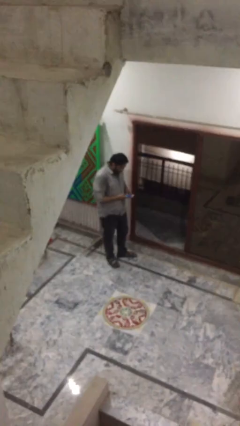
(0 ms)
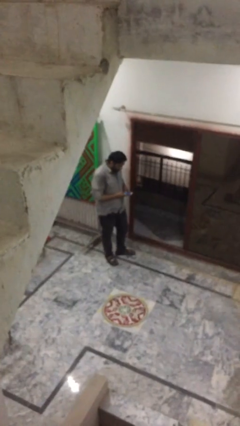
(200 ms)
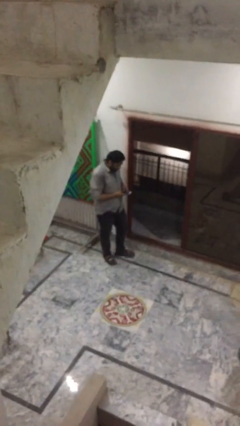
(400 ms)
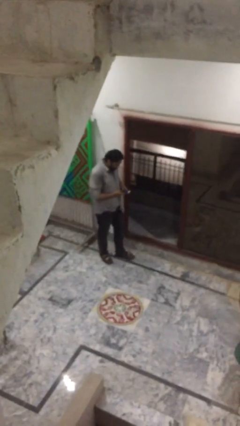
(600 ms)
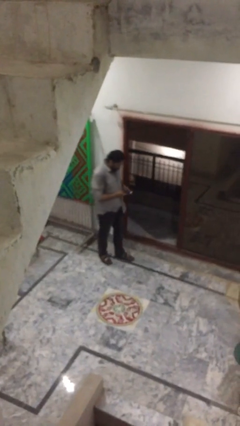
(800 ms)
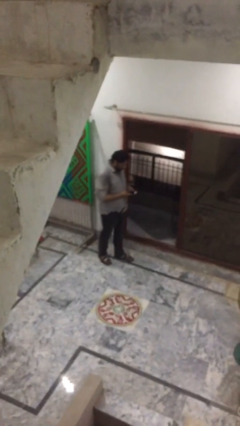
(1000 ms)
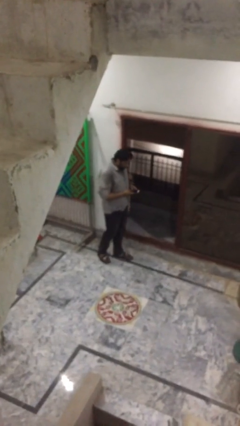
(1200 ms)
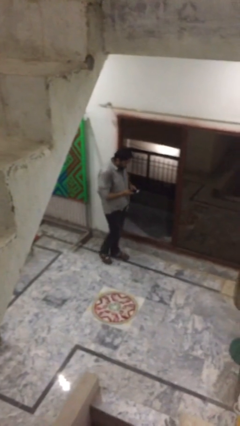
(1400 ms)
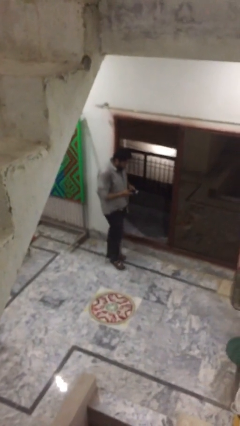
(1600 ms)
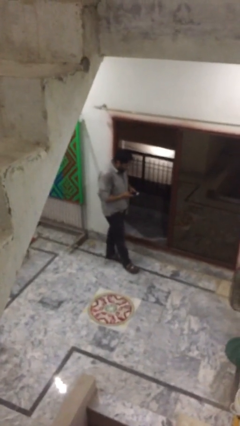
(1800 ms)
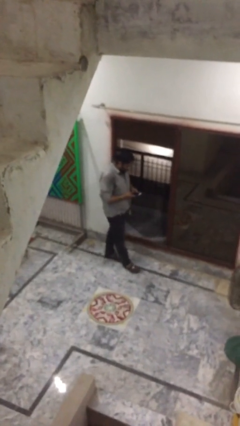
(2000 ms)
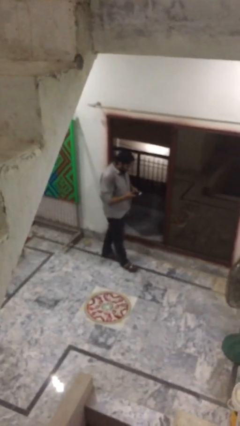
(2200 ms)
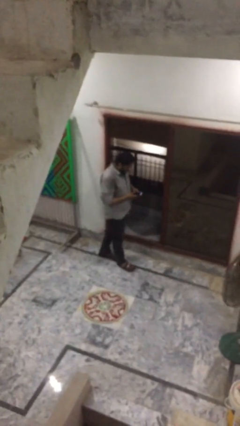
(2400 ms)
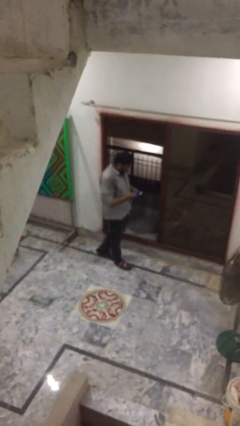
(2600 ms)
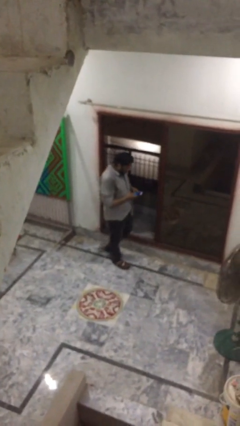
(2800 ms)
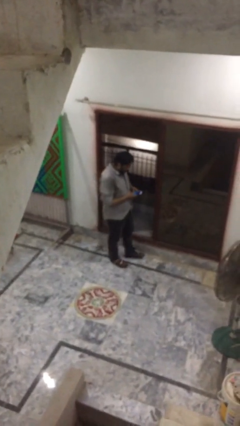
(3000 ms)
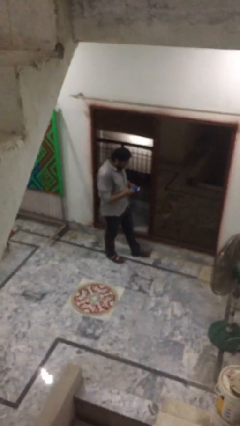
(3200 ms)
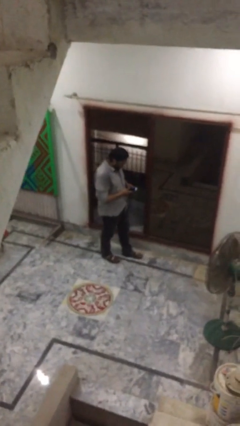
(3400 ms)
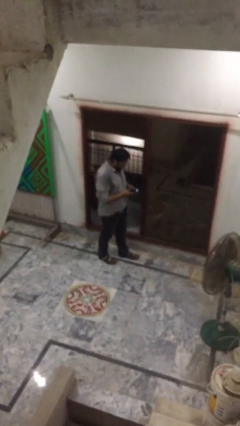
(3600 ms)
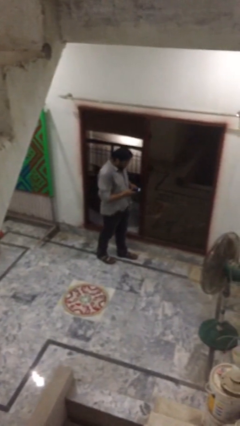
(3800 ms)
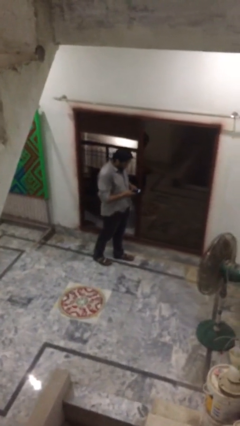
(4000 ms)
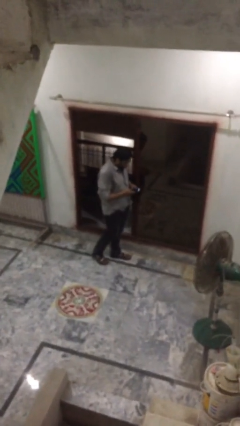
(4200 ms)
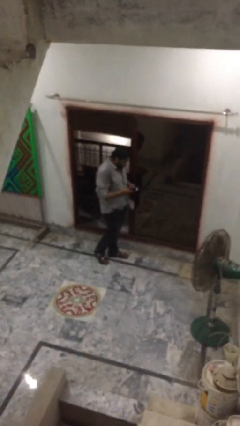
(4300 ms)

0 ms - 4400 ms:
person texts on phone

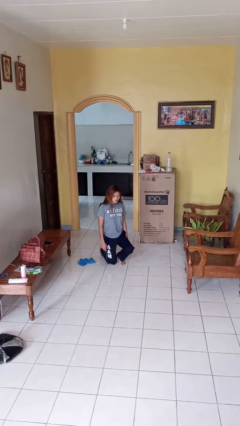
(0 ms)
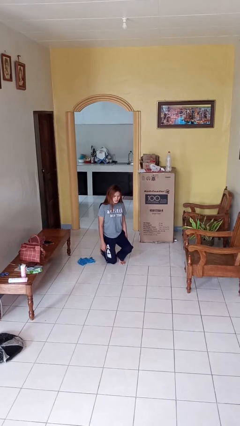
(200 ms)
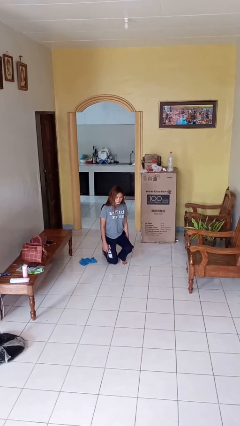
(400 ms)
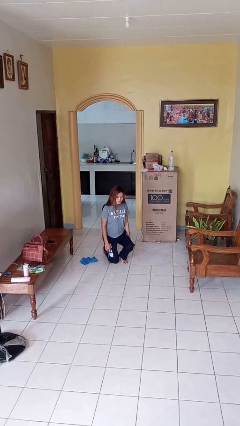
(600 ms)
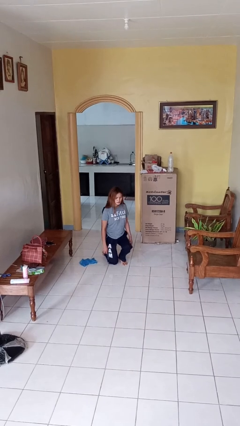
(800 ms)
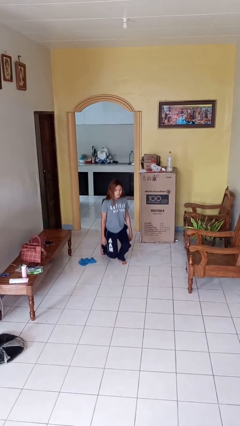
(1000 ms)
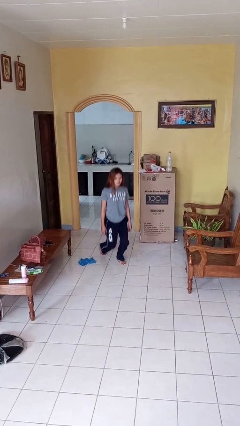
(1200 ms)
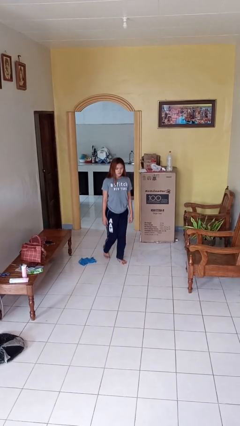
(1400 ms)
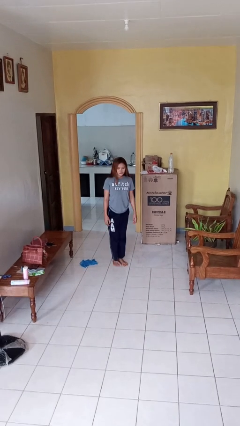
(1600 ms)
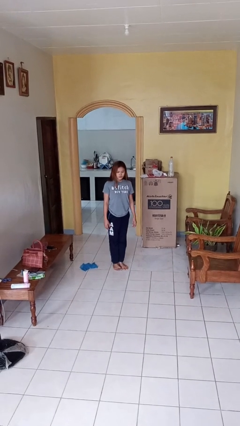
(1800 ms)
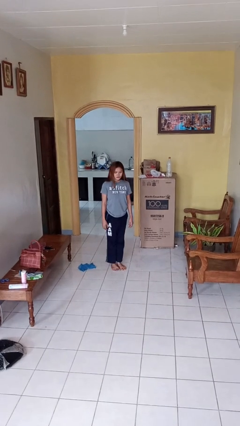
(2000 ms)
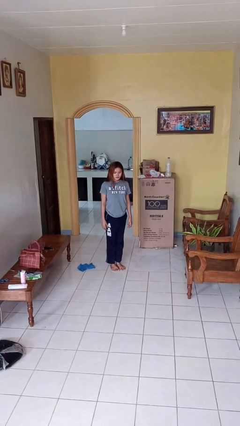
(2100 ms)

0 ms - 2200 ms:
person stands up from floor

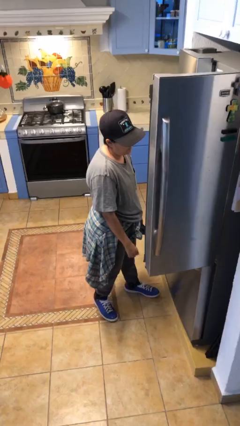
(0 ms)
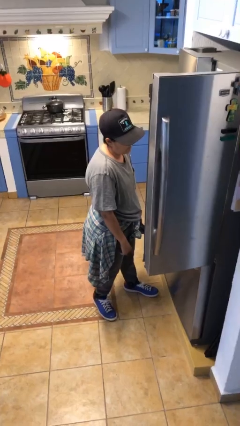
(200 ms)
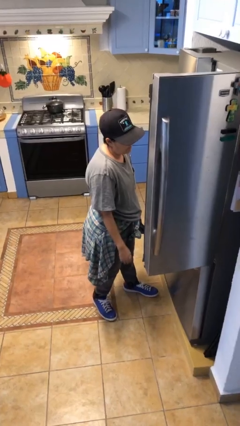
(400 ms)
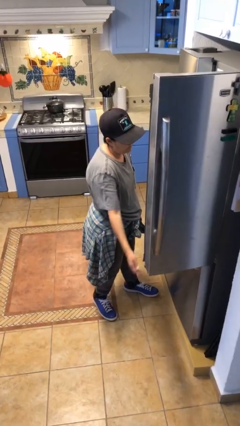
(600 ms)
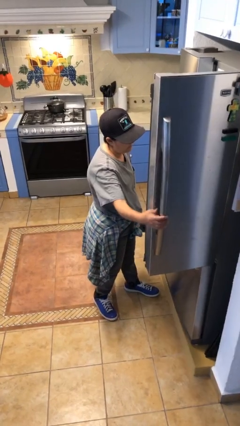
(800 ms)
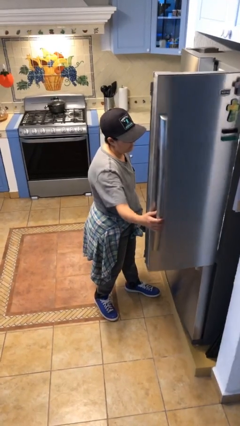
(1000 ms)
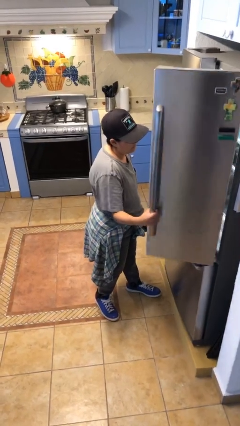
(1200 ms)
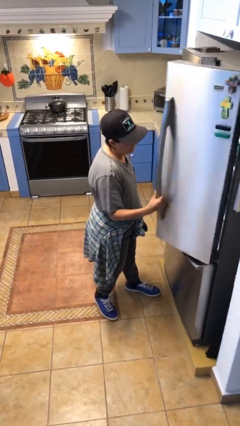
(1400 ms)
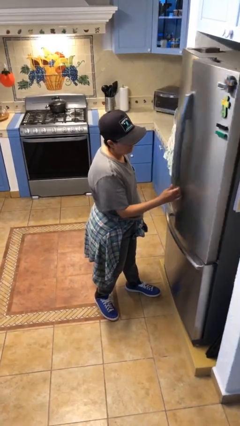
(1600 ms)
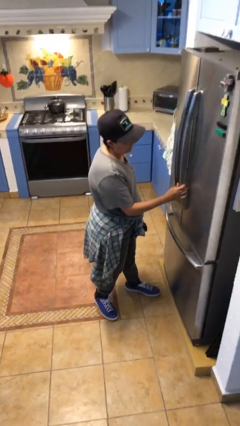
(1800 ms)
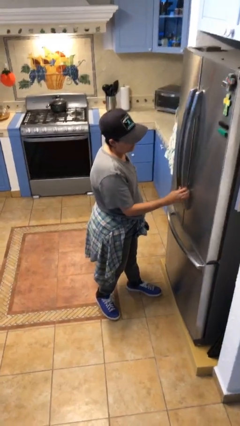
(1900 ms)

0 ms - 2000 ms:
person closes refrigerator

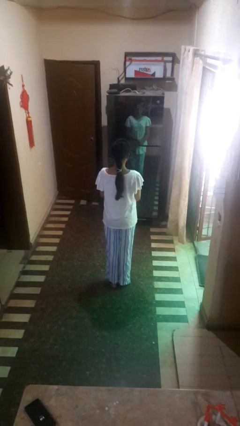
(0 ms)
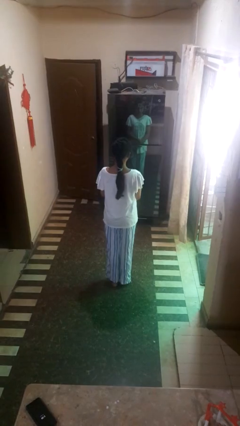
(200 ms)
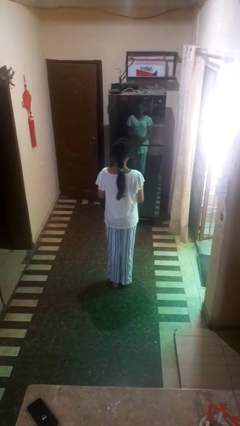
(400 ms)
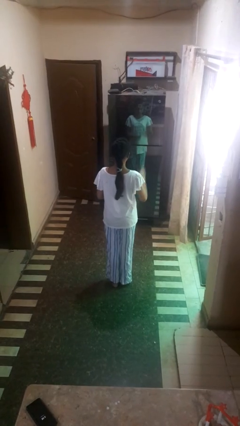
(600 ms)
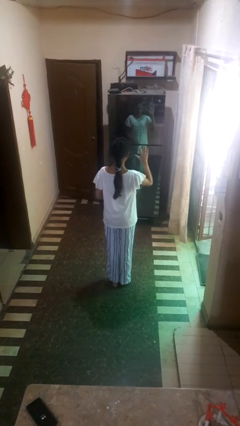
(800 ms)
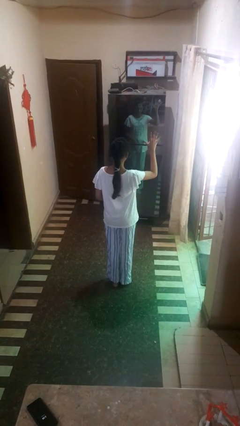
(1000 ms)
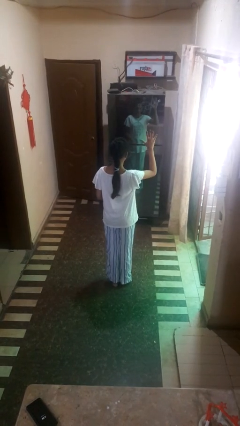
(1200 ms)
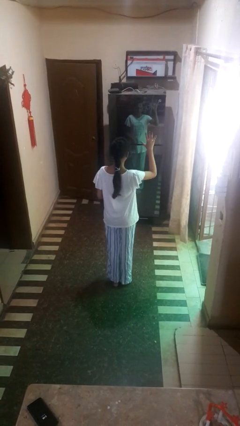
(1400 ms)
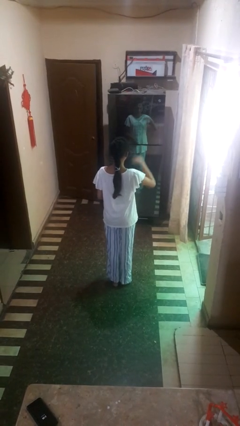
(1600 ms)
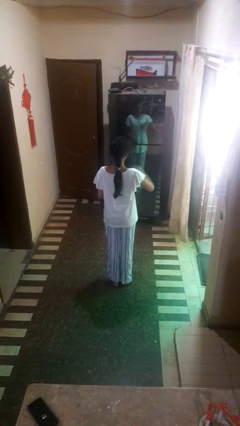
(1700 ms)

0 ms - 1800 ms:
person gestures number five

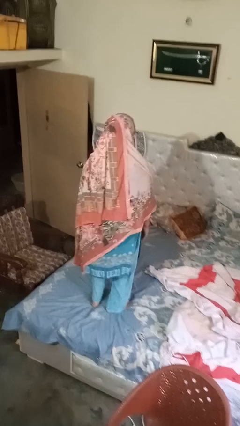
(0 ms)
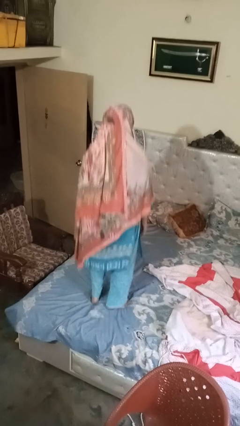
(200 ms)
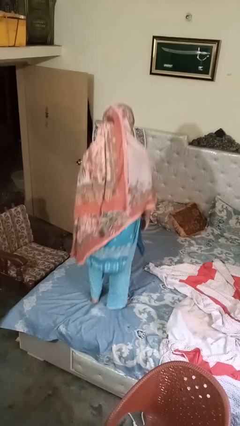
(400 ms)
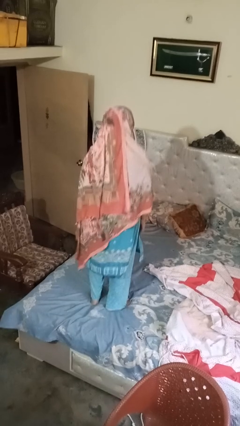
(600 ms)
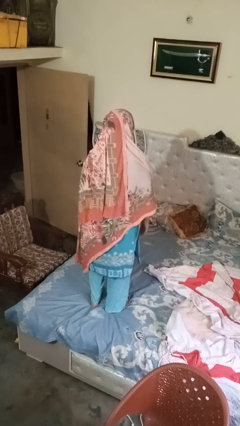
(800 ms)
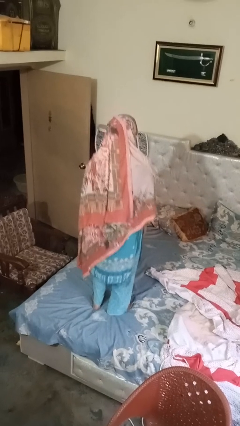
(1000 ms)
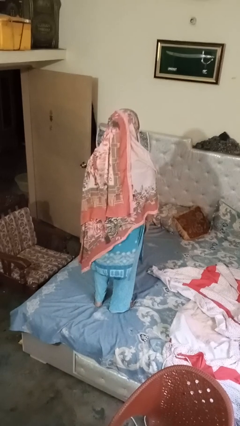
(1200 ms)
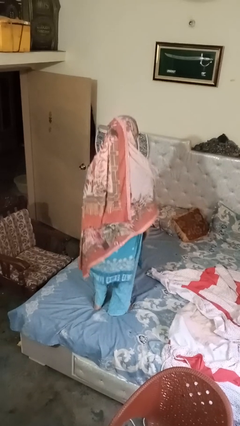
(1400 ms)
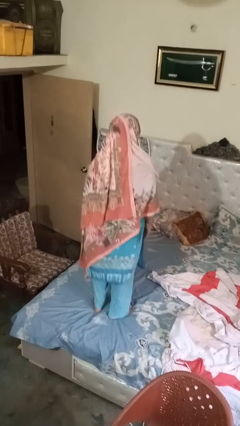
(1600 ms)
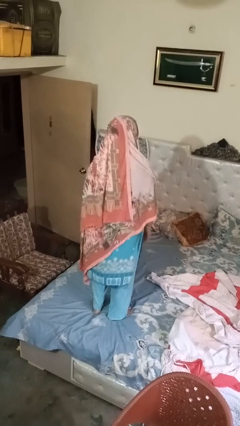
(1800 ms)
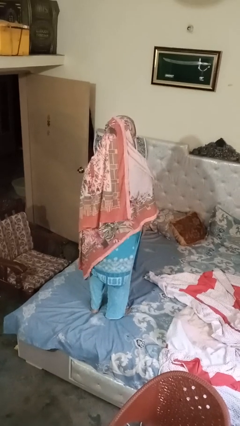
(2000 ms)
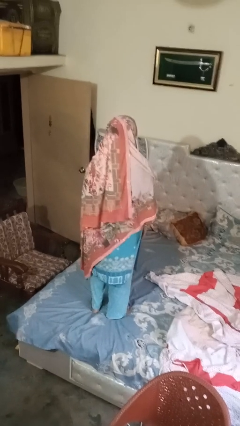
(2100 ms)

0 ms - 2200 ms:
person jumps on bed

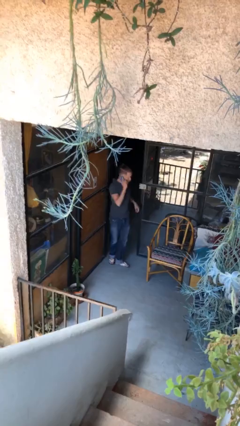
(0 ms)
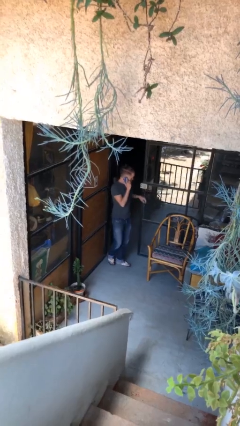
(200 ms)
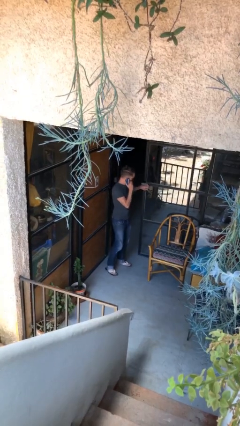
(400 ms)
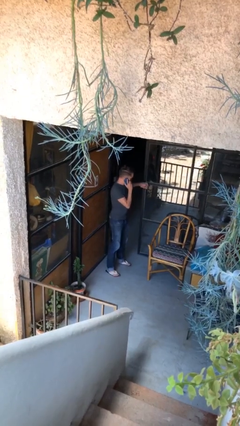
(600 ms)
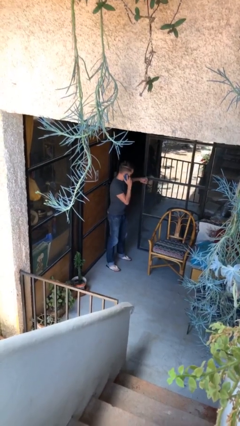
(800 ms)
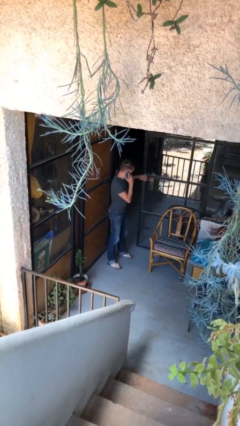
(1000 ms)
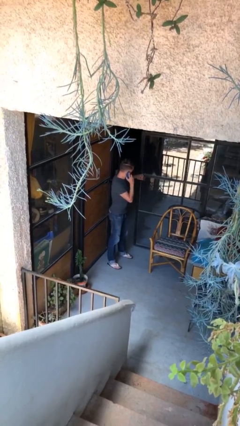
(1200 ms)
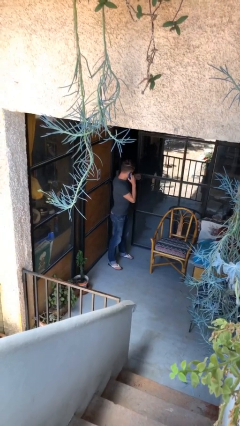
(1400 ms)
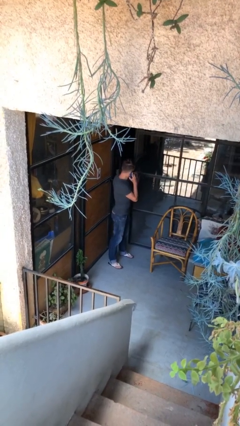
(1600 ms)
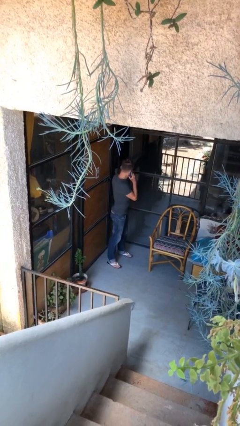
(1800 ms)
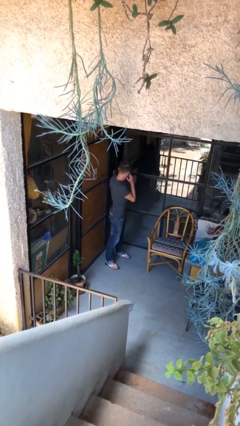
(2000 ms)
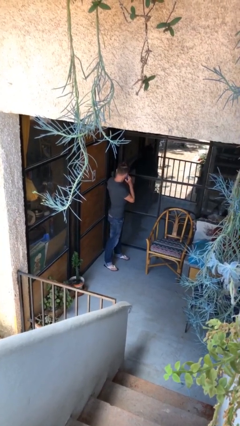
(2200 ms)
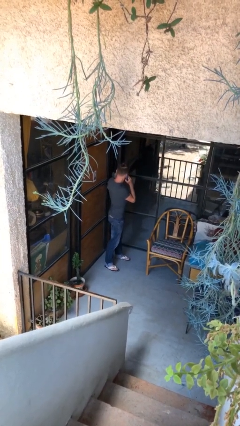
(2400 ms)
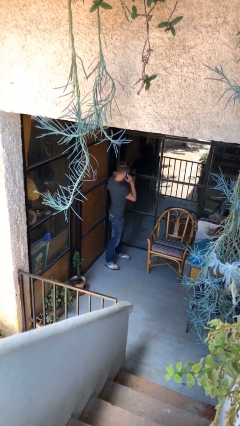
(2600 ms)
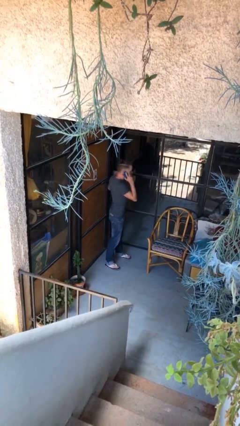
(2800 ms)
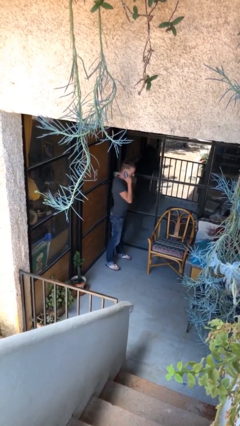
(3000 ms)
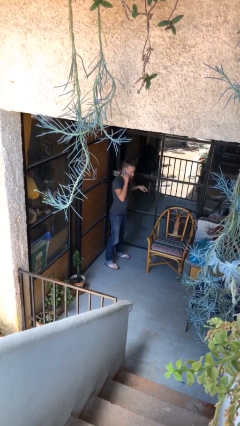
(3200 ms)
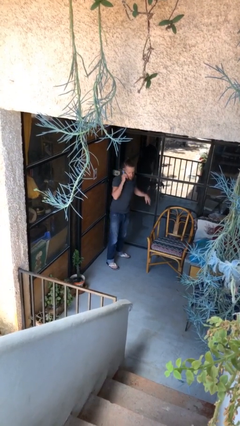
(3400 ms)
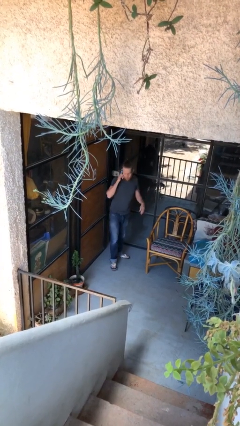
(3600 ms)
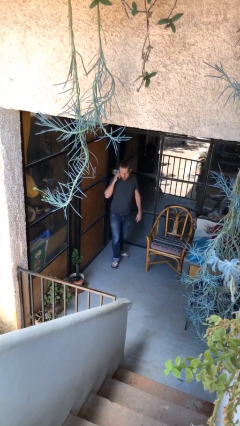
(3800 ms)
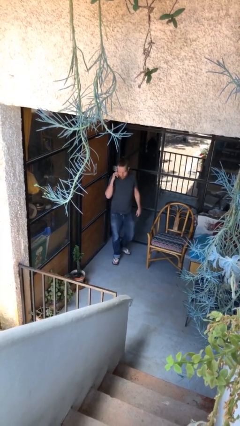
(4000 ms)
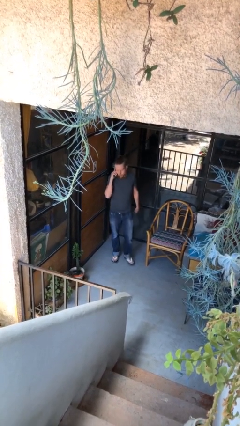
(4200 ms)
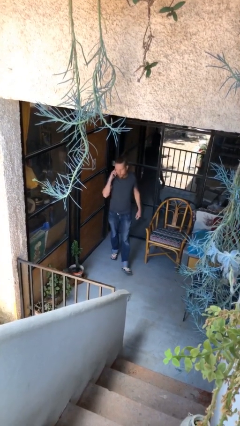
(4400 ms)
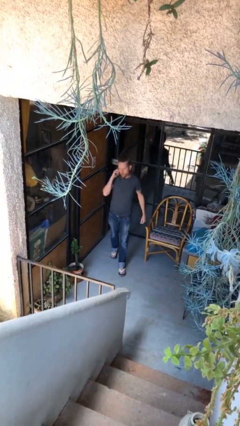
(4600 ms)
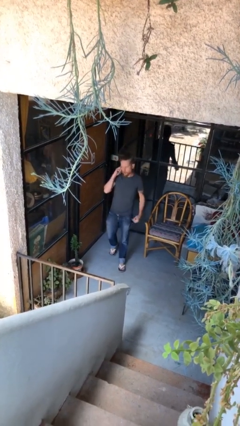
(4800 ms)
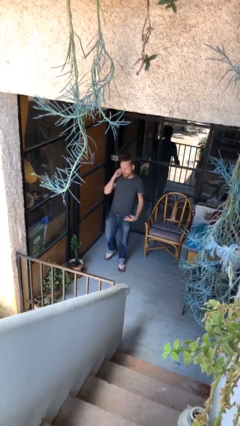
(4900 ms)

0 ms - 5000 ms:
person closes facility door
